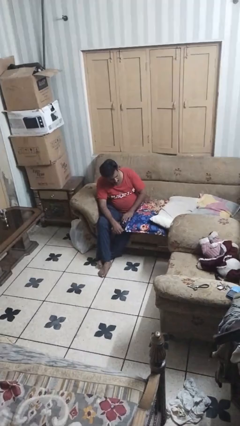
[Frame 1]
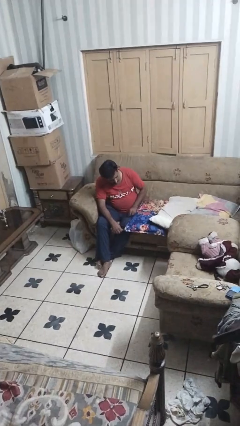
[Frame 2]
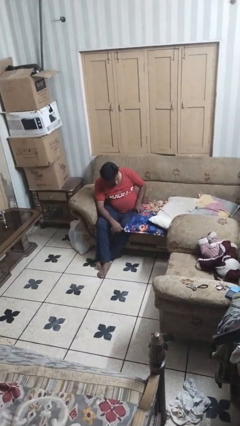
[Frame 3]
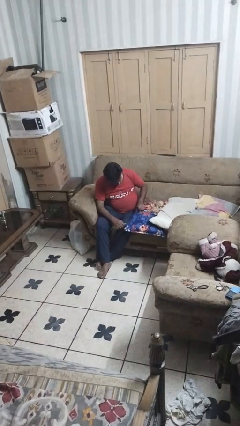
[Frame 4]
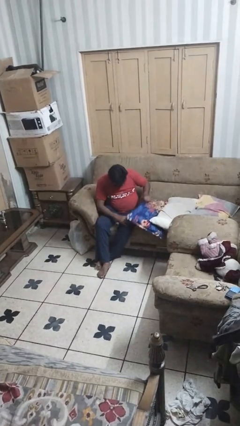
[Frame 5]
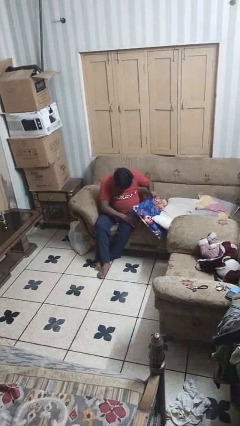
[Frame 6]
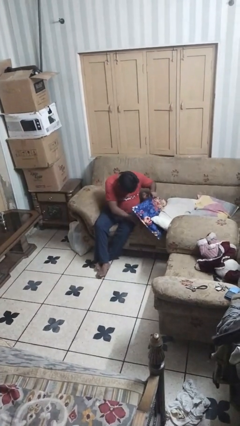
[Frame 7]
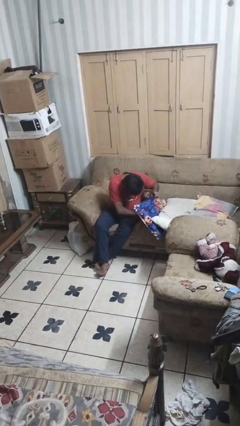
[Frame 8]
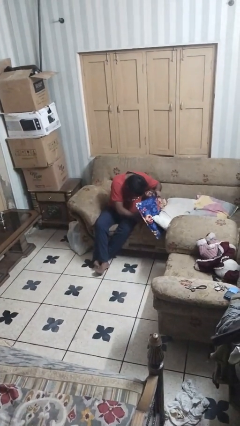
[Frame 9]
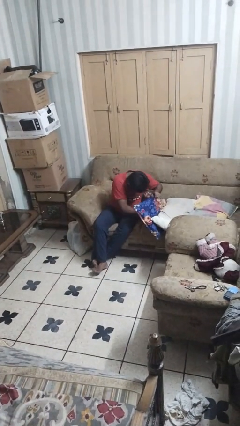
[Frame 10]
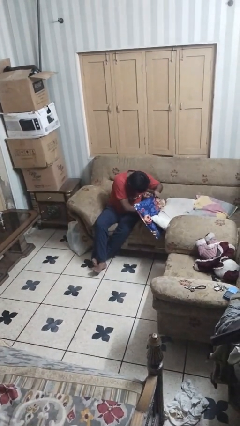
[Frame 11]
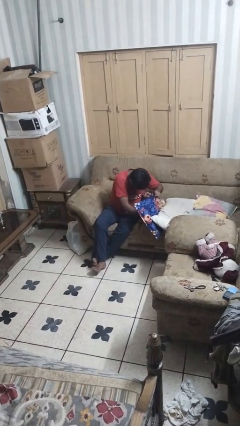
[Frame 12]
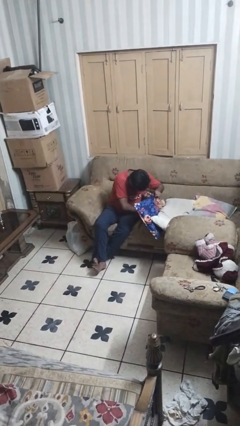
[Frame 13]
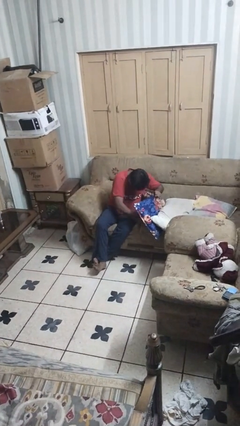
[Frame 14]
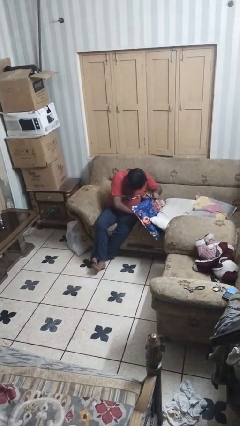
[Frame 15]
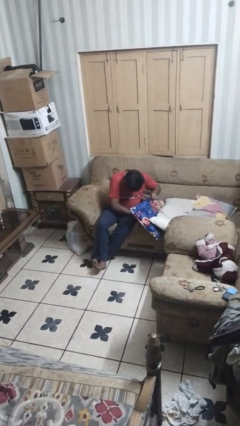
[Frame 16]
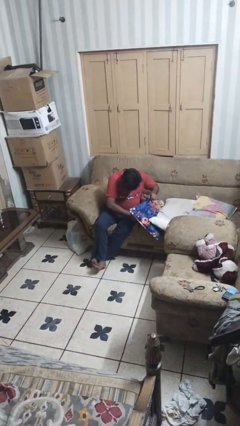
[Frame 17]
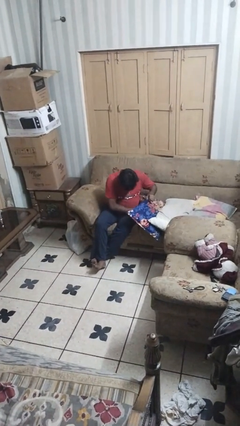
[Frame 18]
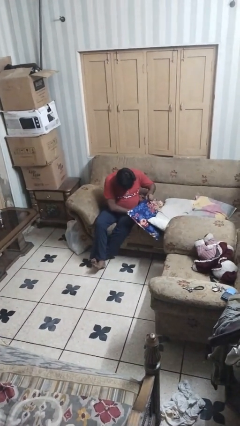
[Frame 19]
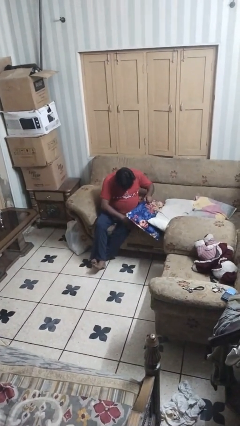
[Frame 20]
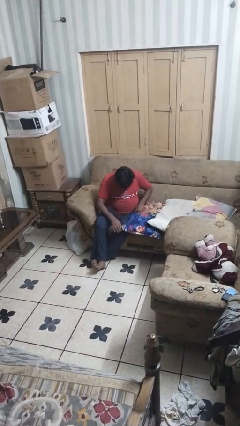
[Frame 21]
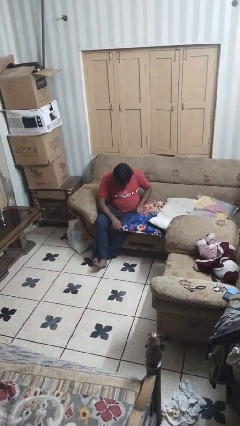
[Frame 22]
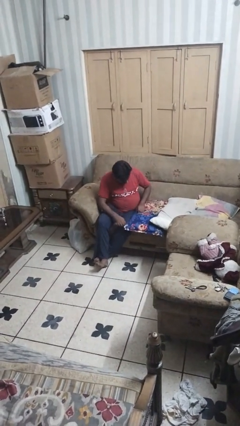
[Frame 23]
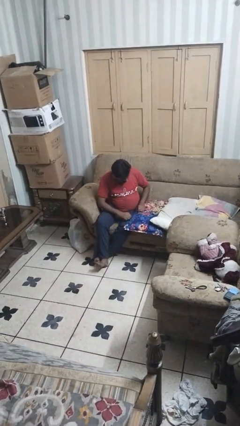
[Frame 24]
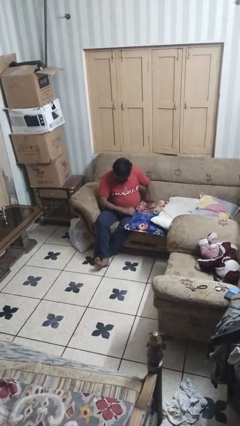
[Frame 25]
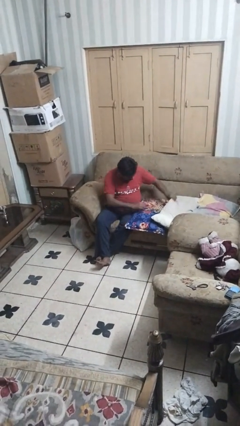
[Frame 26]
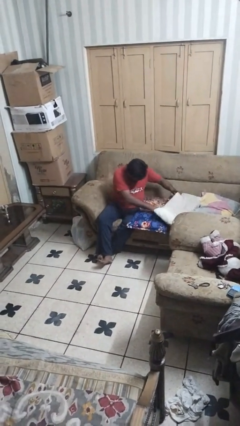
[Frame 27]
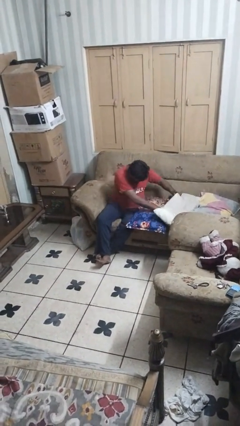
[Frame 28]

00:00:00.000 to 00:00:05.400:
person searches in couch

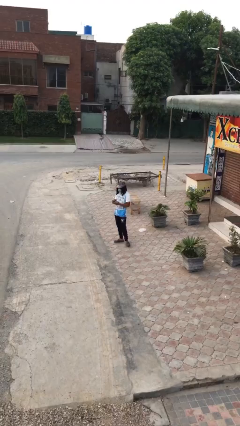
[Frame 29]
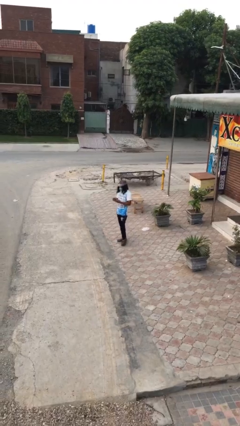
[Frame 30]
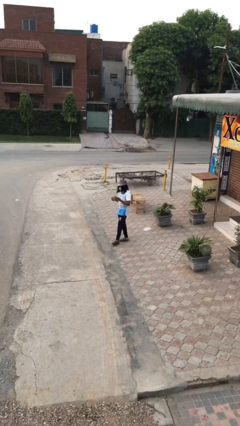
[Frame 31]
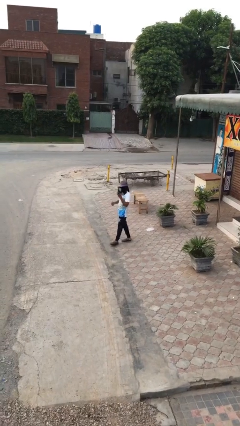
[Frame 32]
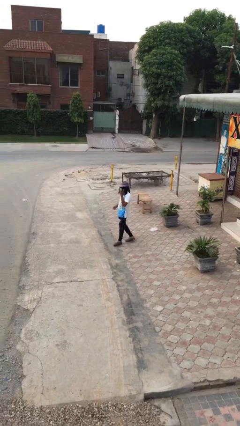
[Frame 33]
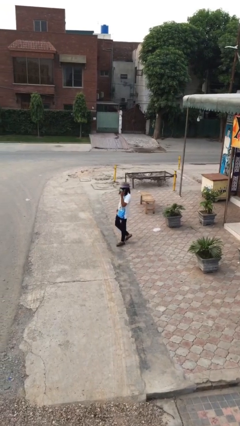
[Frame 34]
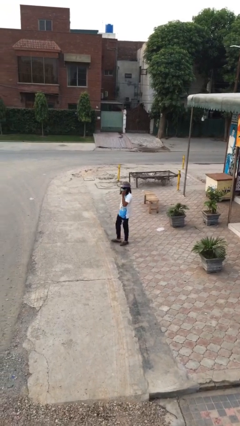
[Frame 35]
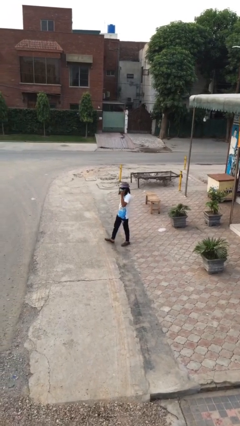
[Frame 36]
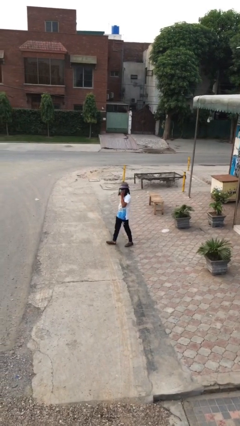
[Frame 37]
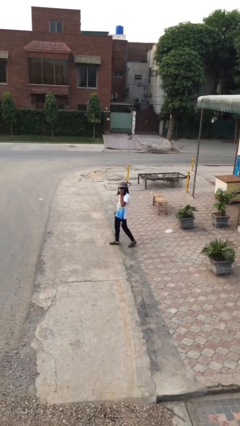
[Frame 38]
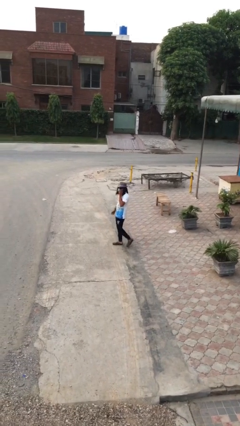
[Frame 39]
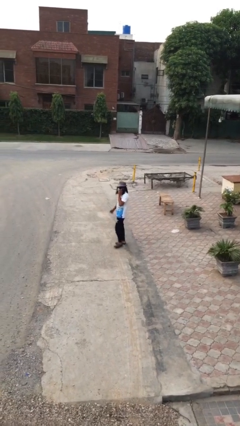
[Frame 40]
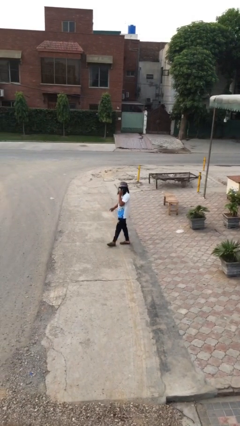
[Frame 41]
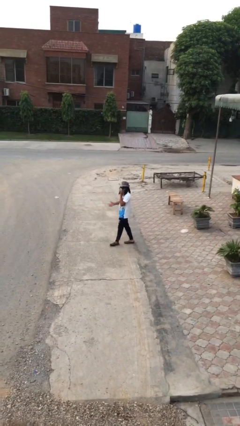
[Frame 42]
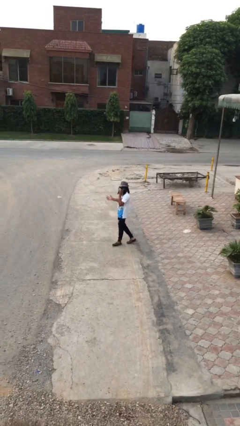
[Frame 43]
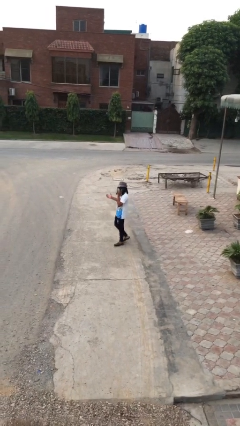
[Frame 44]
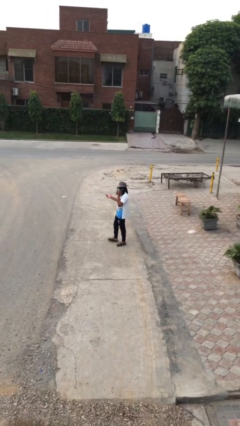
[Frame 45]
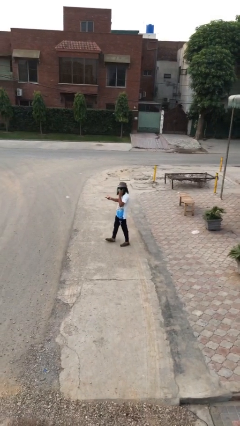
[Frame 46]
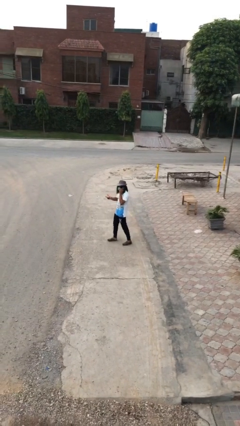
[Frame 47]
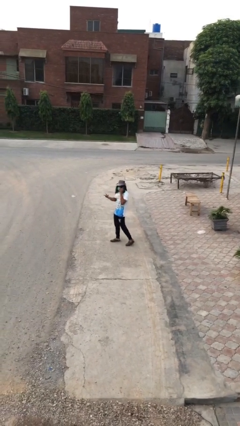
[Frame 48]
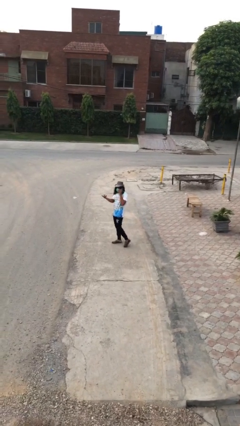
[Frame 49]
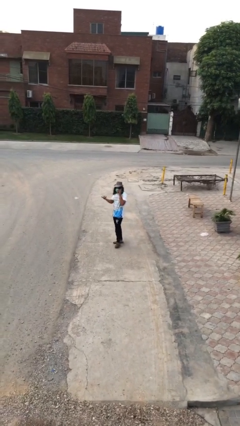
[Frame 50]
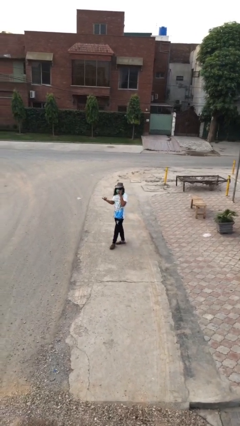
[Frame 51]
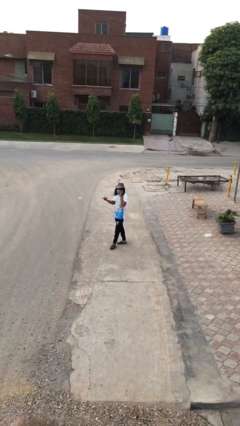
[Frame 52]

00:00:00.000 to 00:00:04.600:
person talks on phone

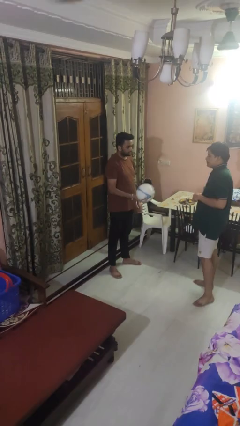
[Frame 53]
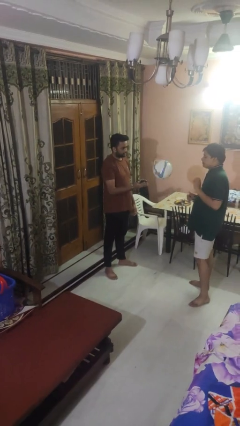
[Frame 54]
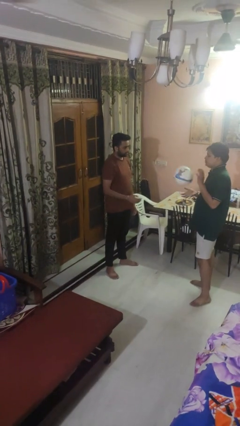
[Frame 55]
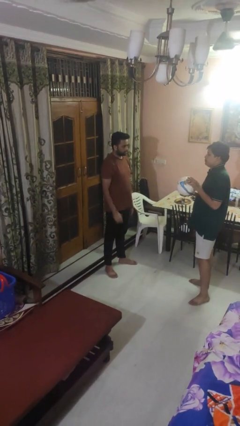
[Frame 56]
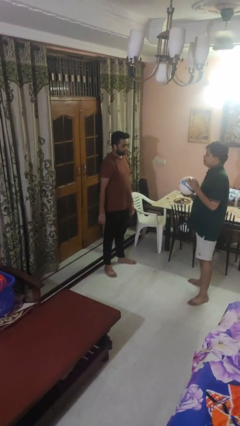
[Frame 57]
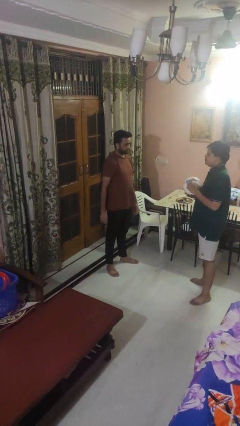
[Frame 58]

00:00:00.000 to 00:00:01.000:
person throws object to person

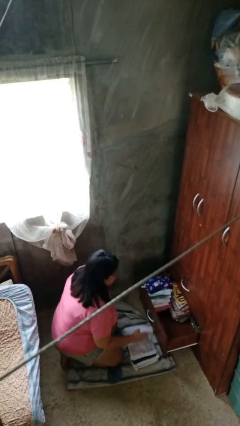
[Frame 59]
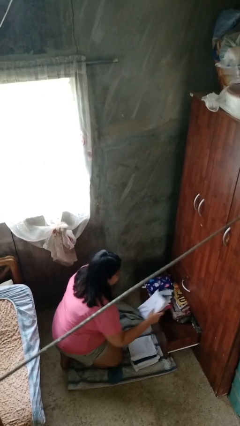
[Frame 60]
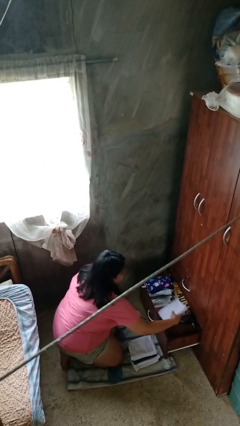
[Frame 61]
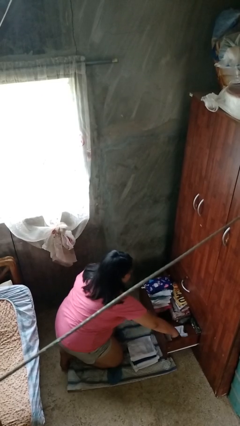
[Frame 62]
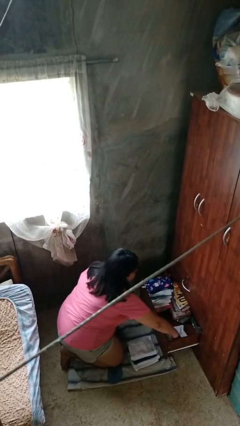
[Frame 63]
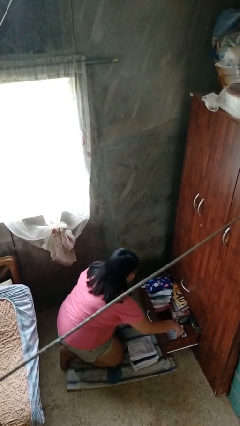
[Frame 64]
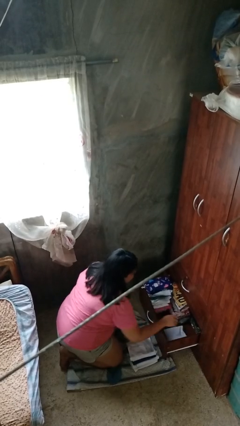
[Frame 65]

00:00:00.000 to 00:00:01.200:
person puts clothes into dresser

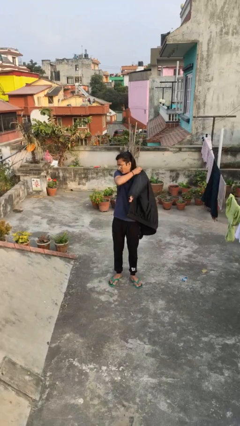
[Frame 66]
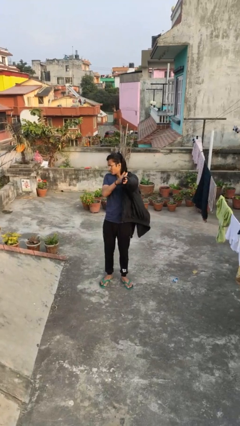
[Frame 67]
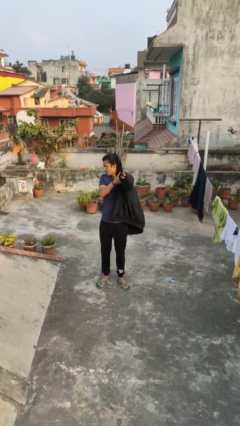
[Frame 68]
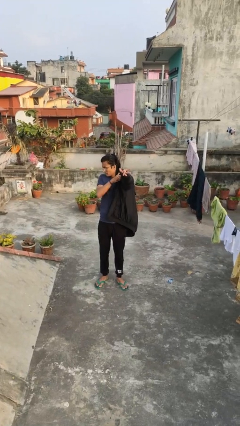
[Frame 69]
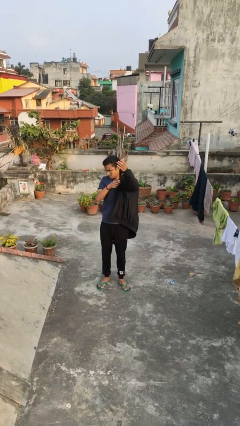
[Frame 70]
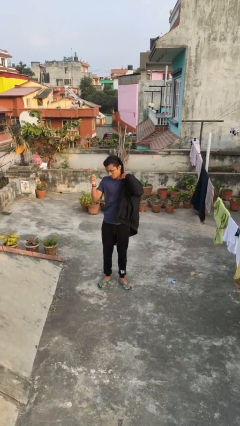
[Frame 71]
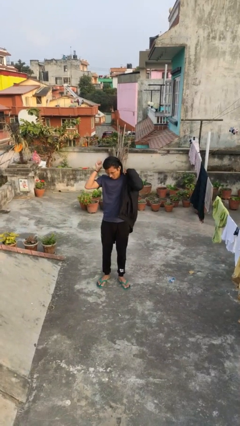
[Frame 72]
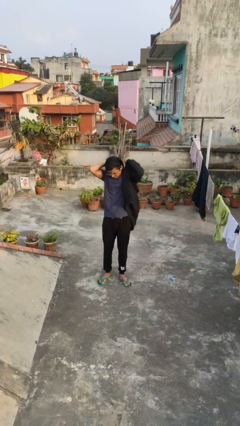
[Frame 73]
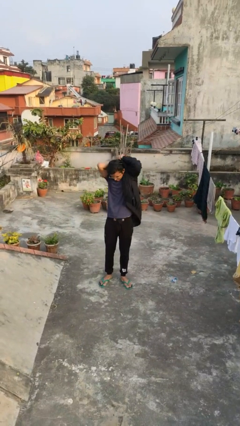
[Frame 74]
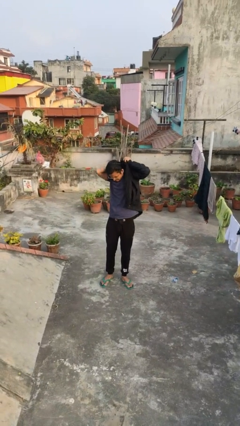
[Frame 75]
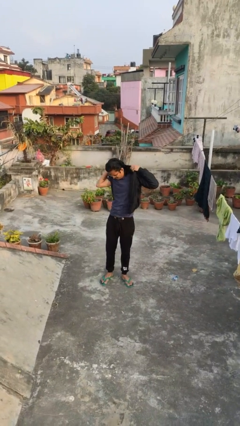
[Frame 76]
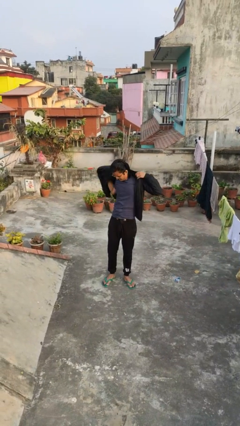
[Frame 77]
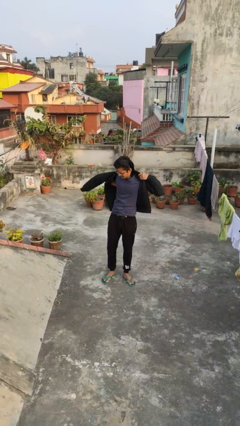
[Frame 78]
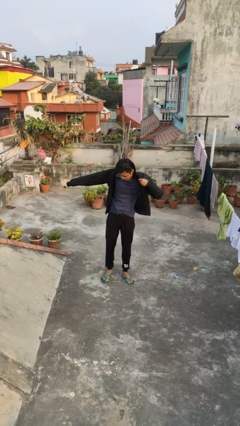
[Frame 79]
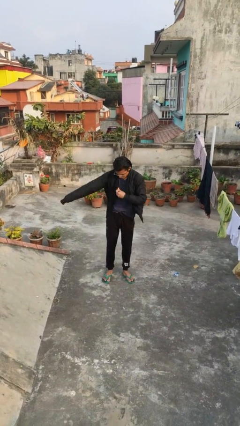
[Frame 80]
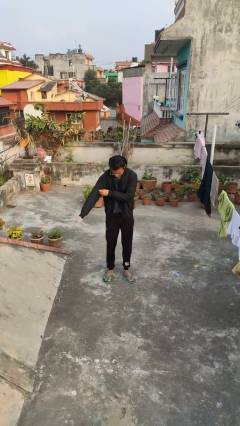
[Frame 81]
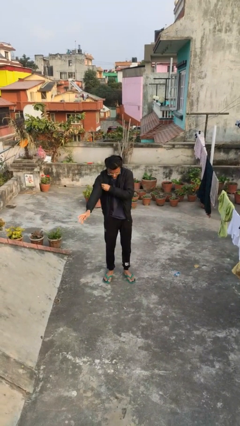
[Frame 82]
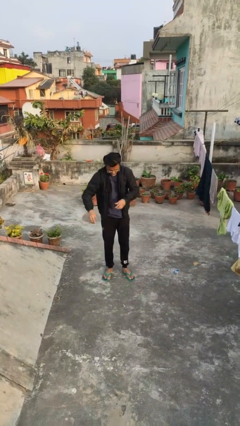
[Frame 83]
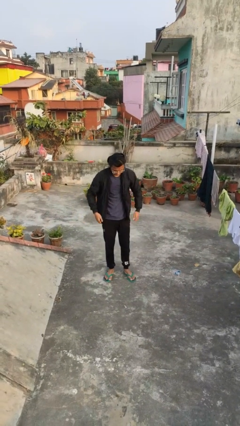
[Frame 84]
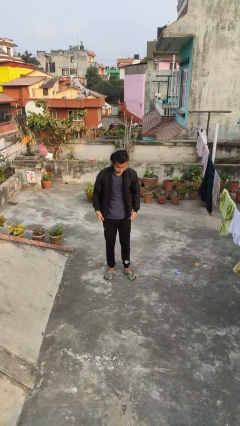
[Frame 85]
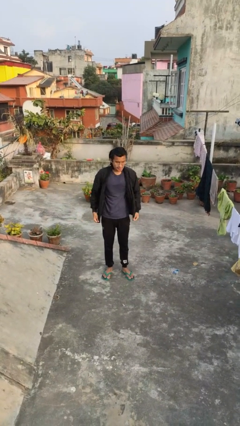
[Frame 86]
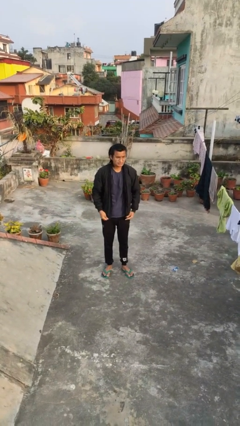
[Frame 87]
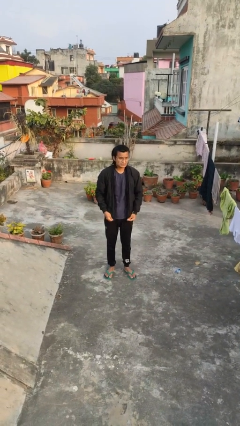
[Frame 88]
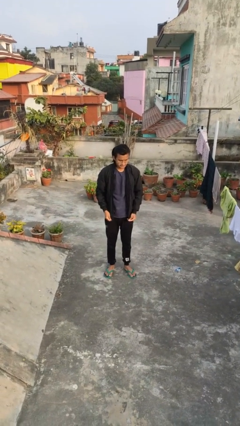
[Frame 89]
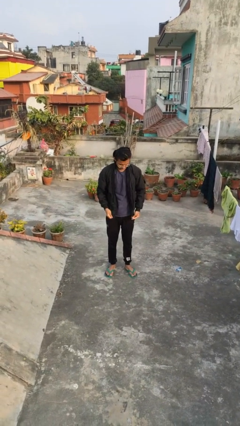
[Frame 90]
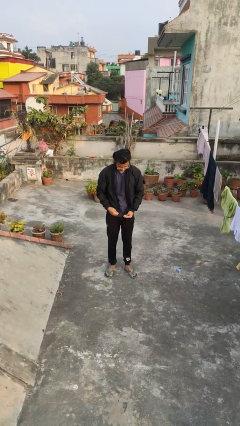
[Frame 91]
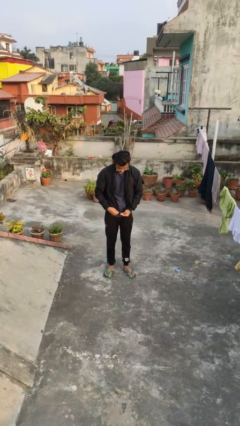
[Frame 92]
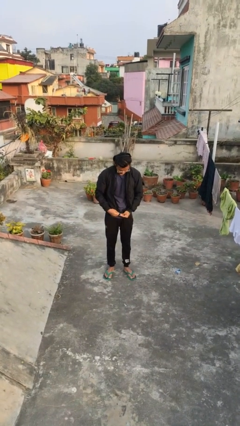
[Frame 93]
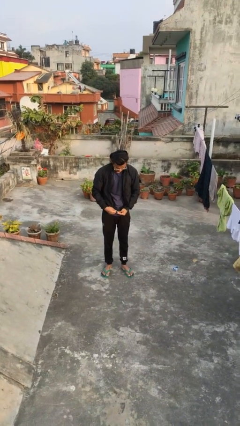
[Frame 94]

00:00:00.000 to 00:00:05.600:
person puts on jacket
